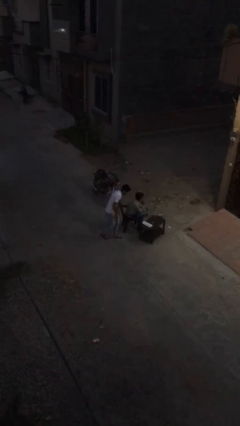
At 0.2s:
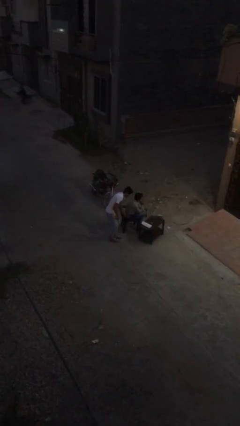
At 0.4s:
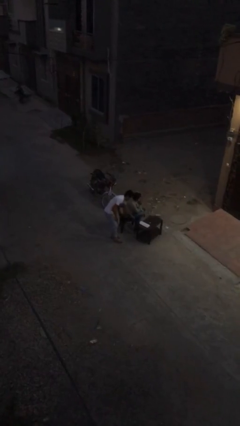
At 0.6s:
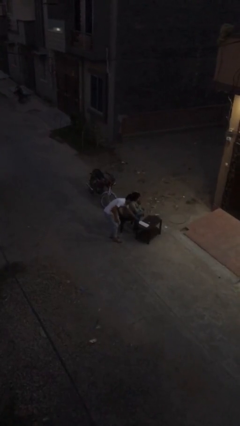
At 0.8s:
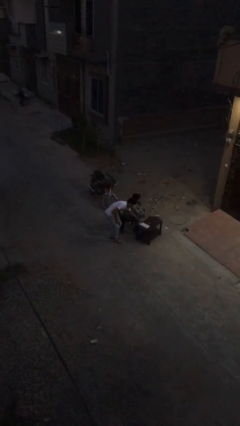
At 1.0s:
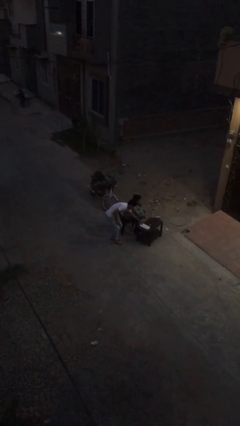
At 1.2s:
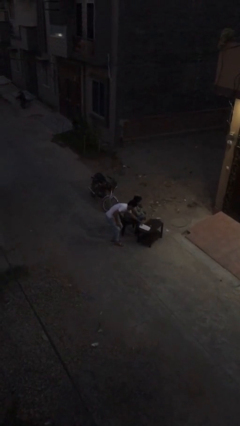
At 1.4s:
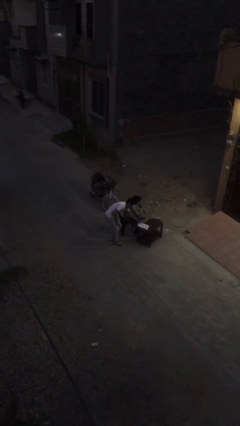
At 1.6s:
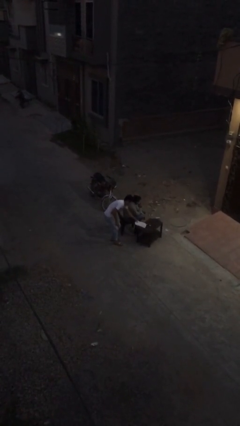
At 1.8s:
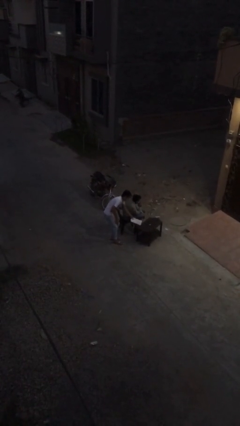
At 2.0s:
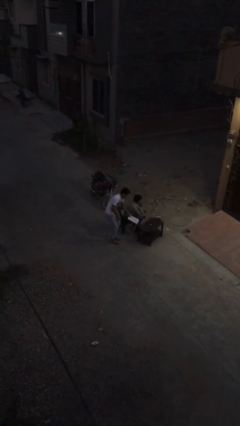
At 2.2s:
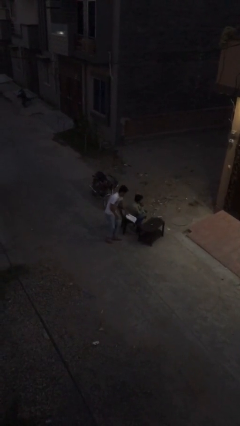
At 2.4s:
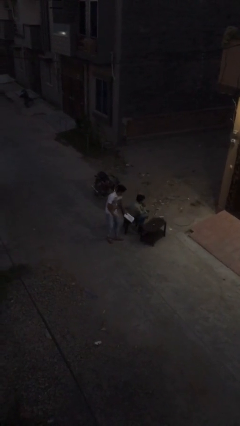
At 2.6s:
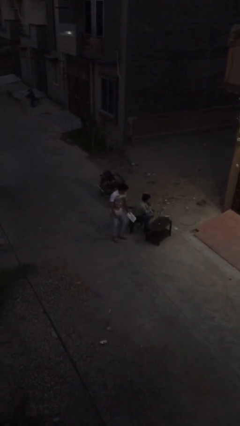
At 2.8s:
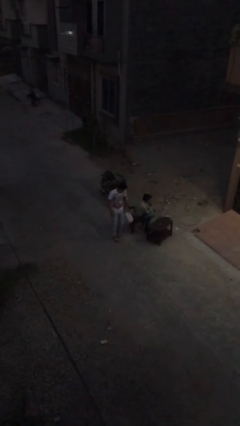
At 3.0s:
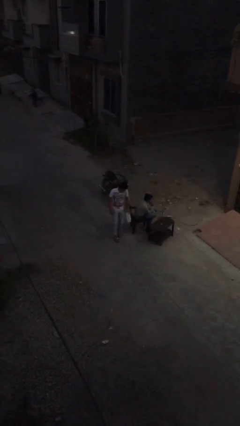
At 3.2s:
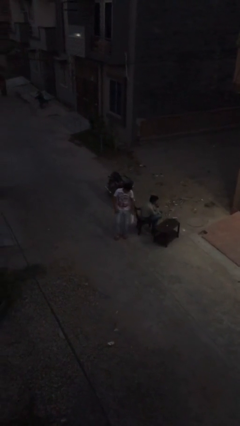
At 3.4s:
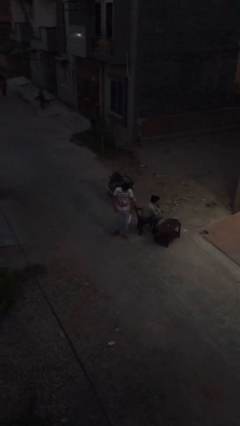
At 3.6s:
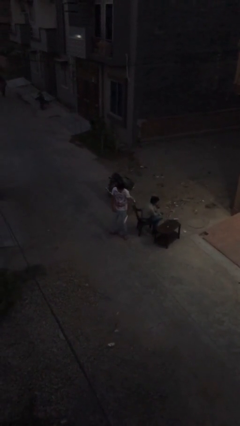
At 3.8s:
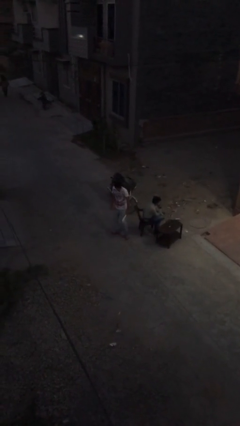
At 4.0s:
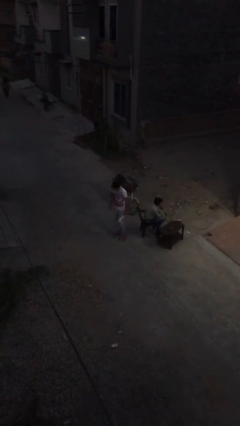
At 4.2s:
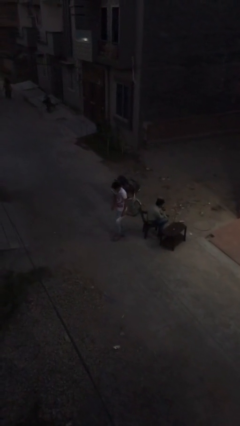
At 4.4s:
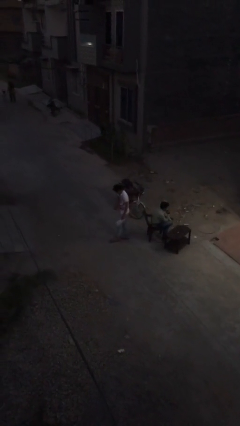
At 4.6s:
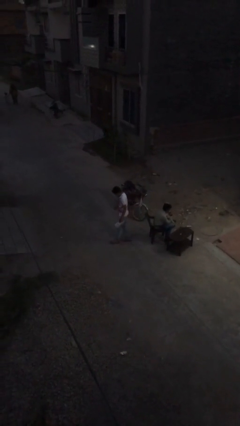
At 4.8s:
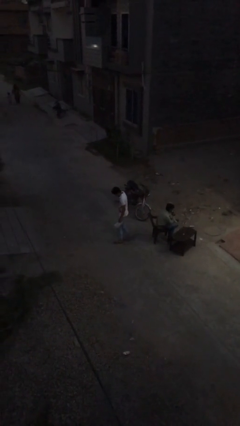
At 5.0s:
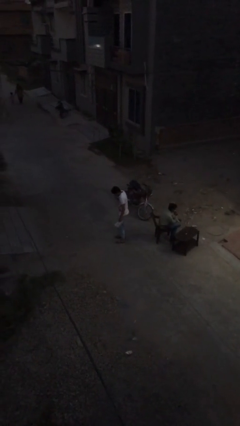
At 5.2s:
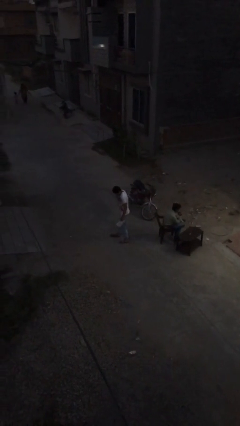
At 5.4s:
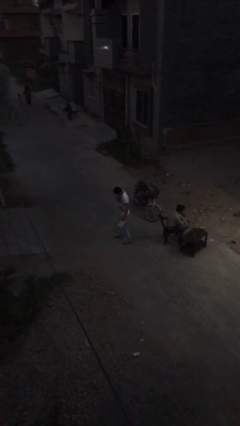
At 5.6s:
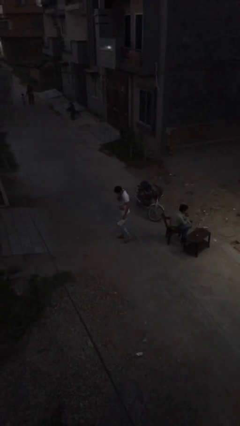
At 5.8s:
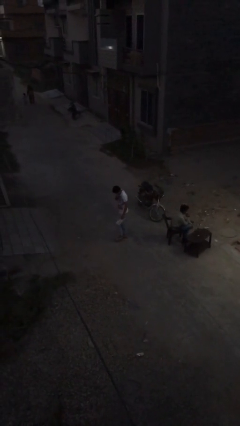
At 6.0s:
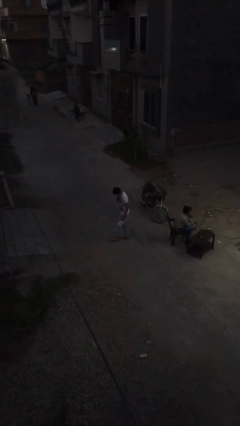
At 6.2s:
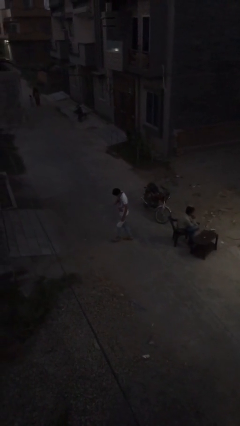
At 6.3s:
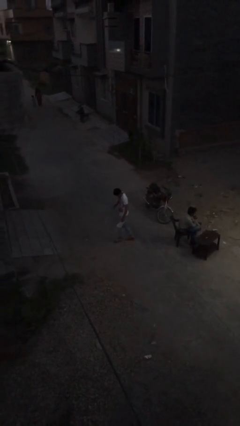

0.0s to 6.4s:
person steals object from person

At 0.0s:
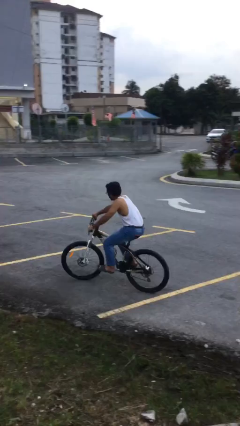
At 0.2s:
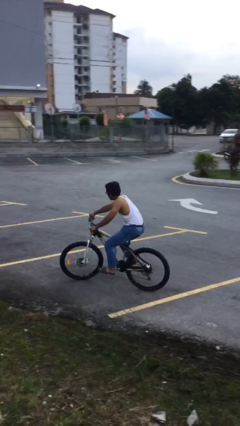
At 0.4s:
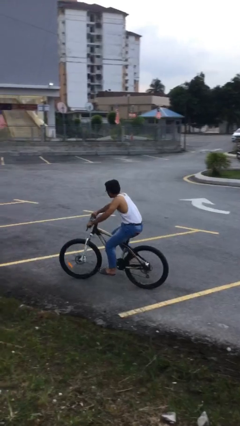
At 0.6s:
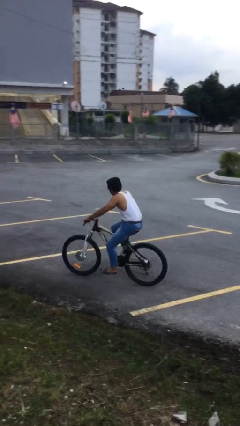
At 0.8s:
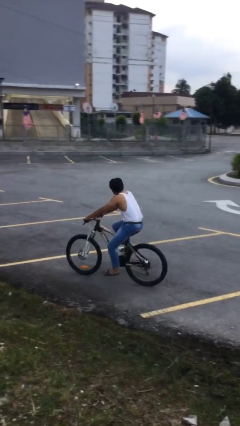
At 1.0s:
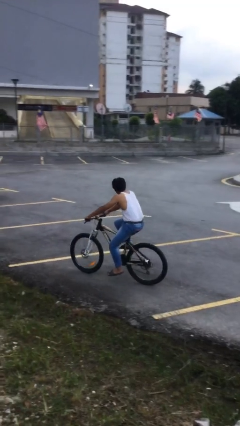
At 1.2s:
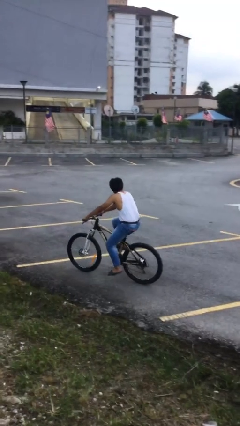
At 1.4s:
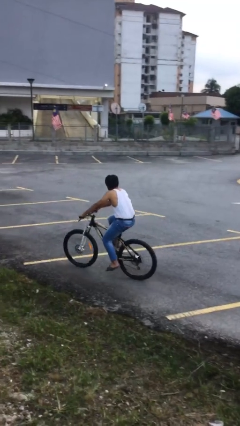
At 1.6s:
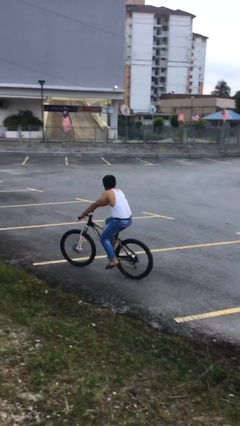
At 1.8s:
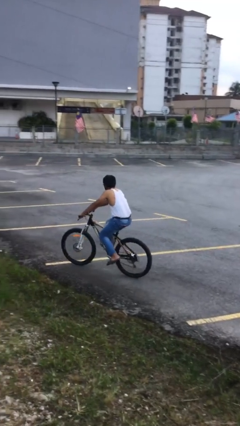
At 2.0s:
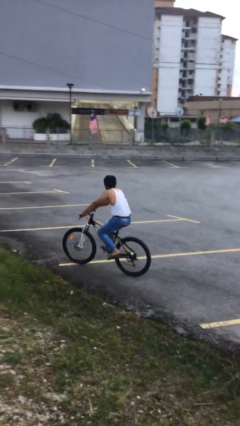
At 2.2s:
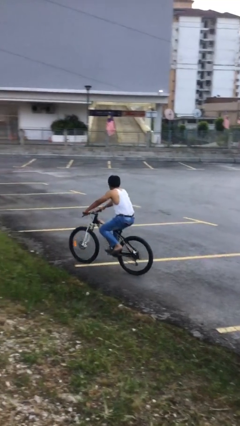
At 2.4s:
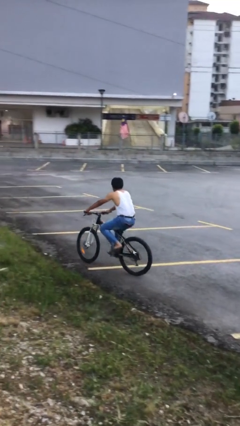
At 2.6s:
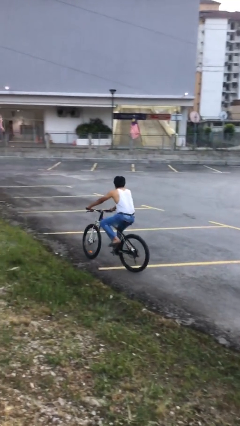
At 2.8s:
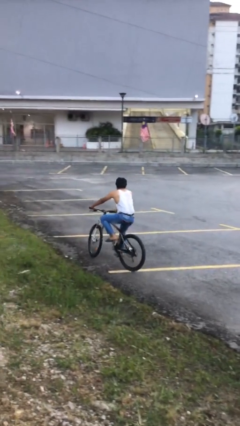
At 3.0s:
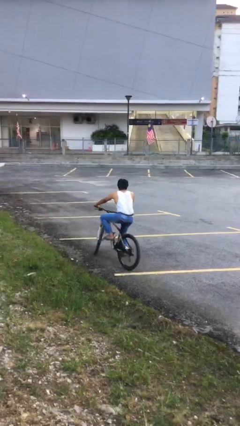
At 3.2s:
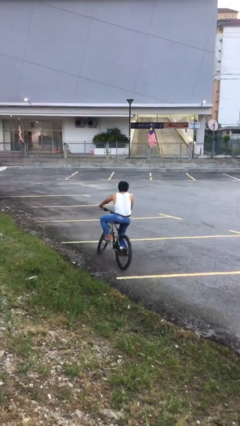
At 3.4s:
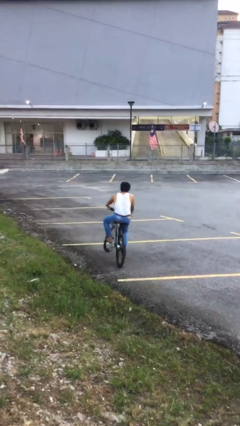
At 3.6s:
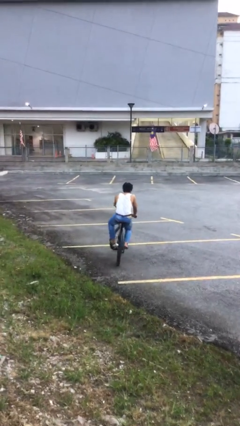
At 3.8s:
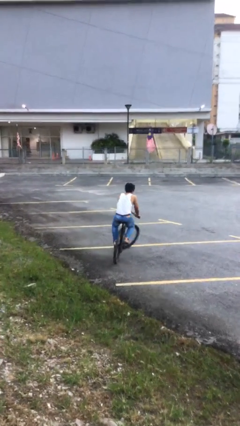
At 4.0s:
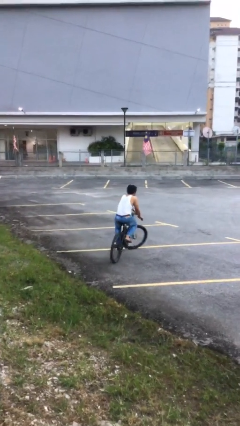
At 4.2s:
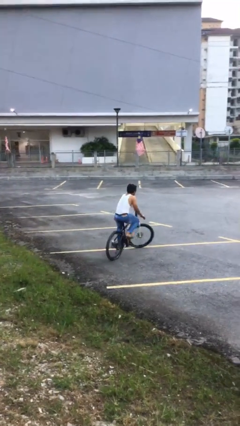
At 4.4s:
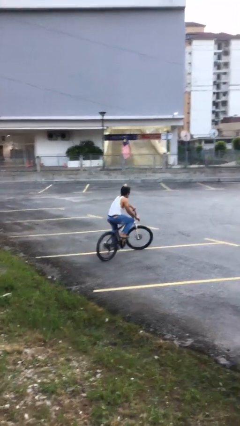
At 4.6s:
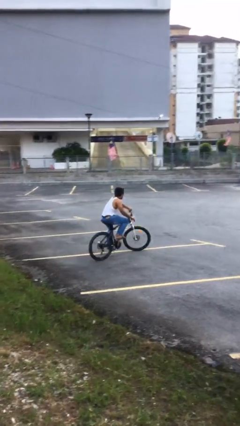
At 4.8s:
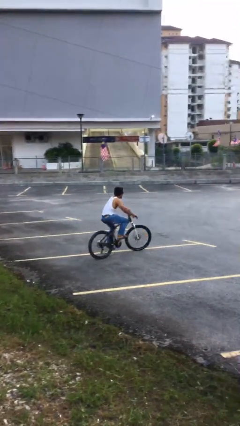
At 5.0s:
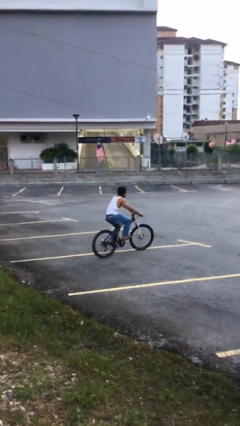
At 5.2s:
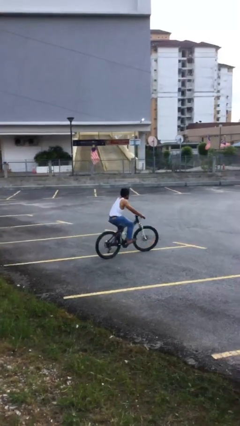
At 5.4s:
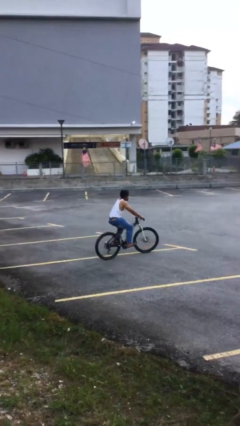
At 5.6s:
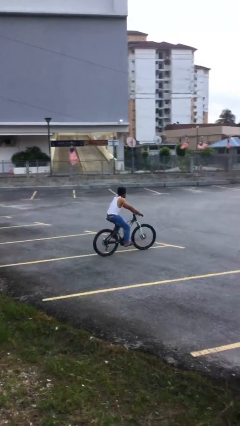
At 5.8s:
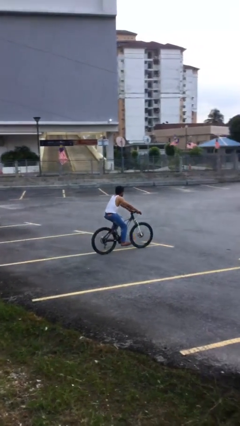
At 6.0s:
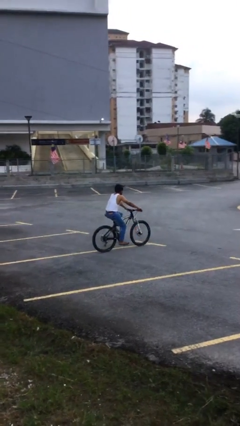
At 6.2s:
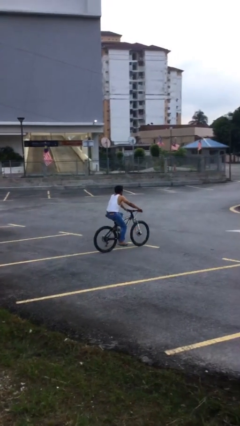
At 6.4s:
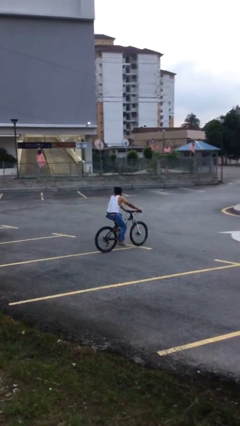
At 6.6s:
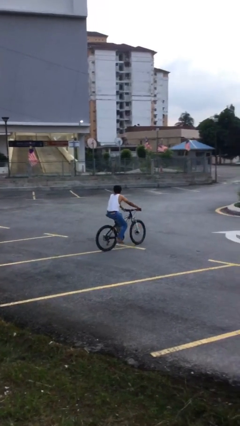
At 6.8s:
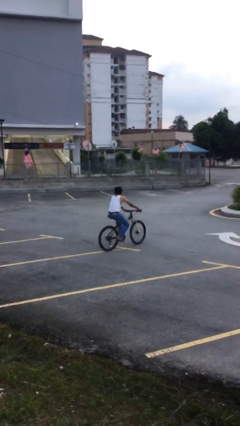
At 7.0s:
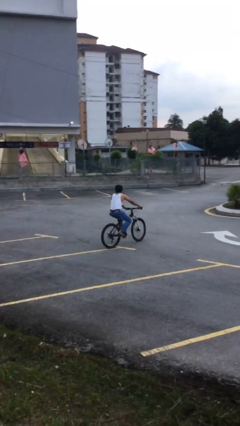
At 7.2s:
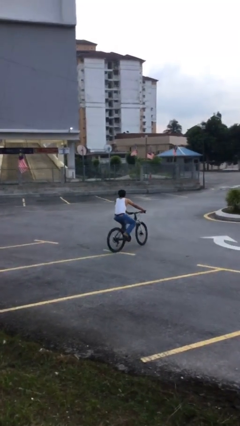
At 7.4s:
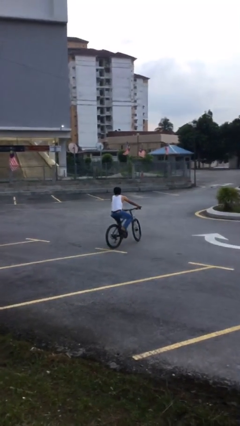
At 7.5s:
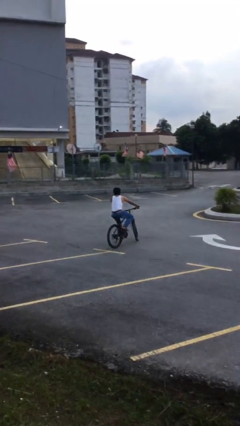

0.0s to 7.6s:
person rides bicycle

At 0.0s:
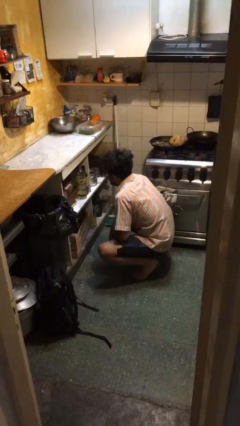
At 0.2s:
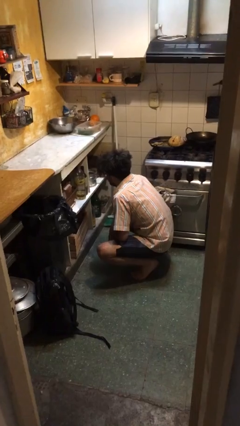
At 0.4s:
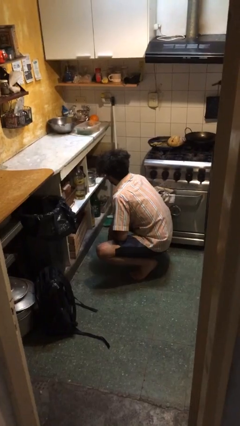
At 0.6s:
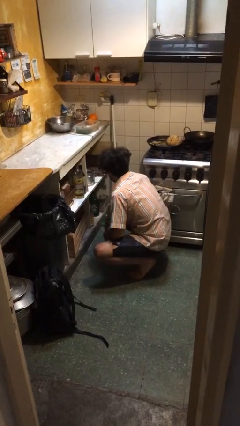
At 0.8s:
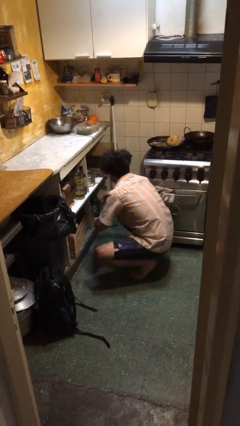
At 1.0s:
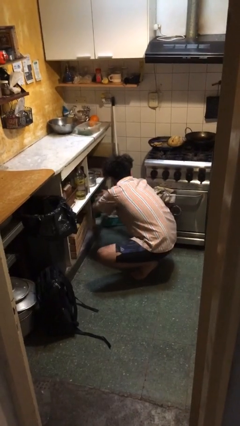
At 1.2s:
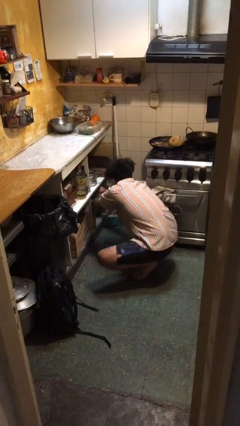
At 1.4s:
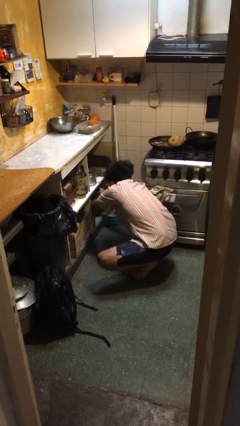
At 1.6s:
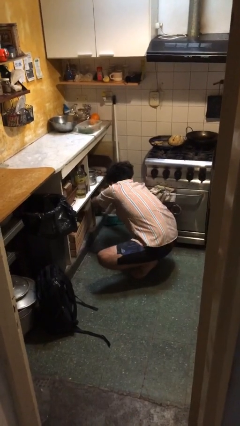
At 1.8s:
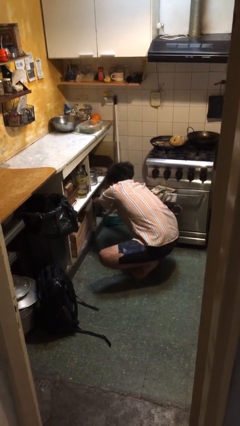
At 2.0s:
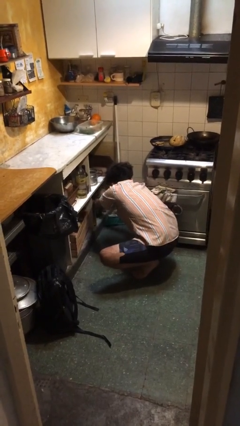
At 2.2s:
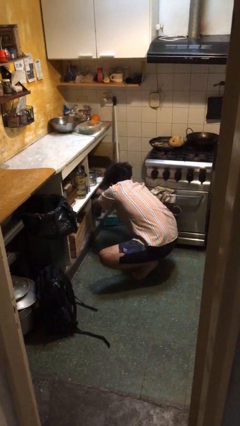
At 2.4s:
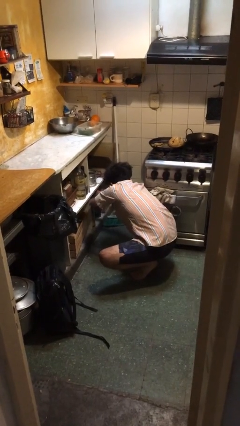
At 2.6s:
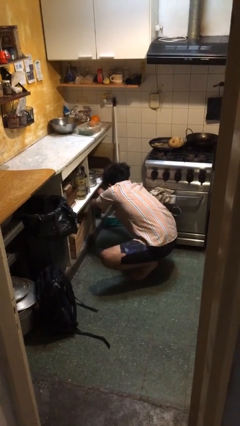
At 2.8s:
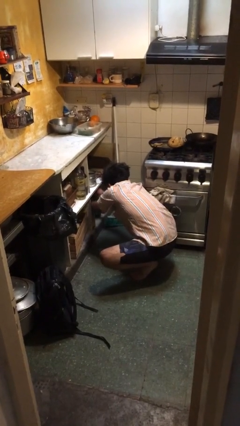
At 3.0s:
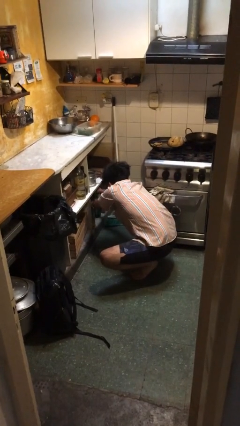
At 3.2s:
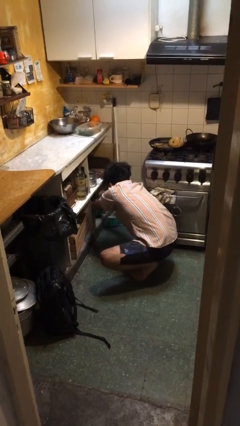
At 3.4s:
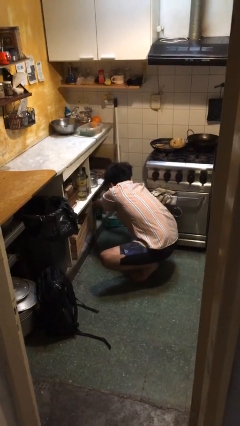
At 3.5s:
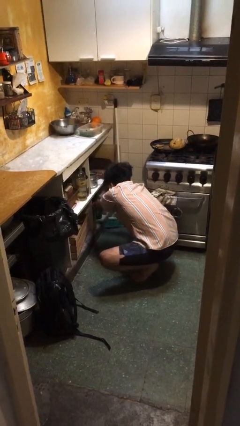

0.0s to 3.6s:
person searches in cabinet
